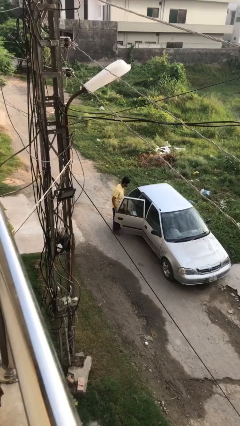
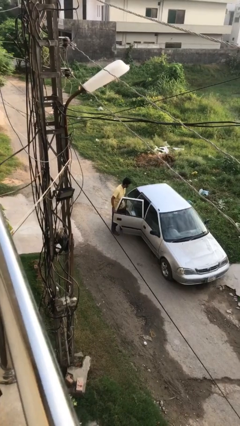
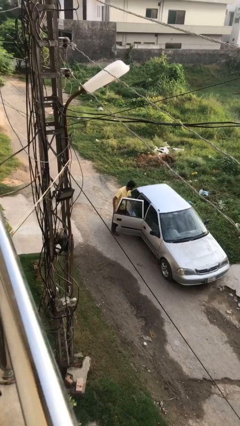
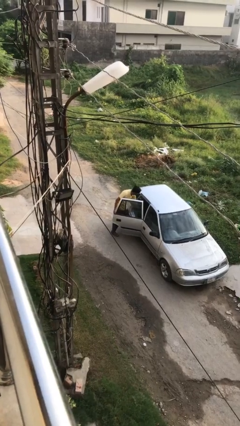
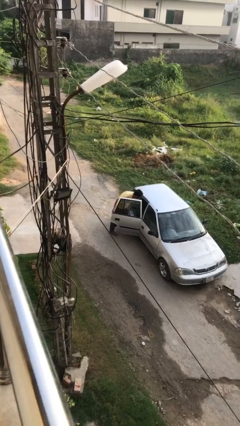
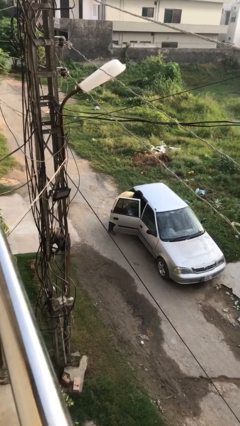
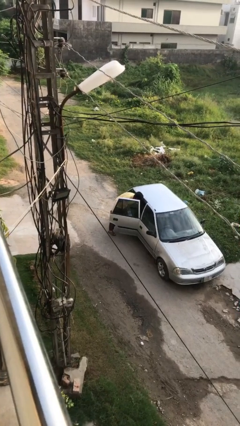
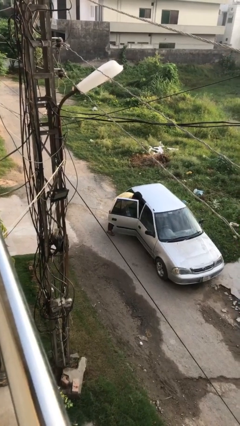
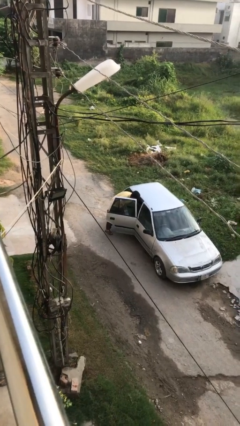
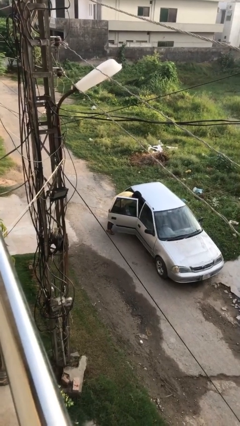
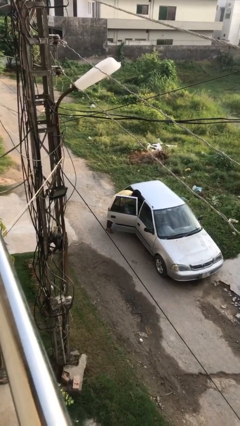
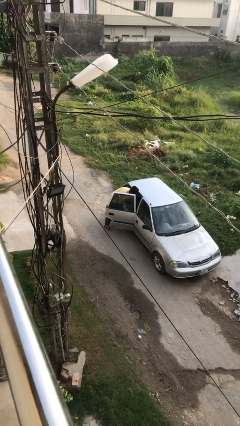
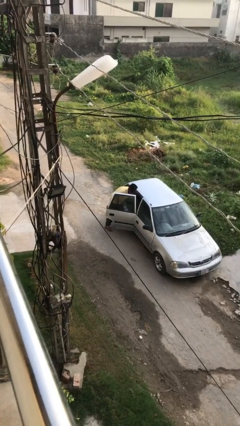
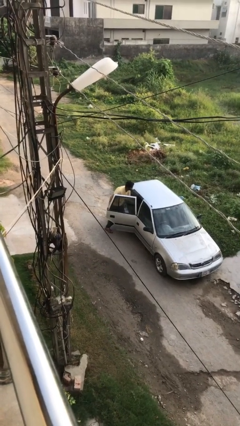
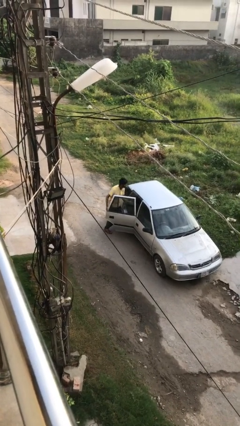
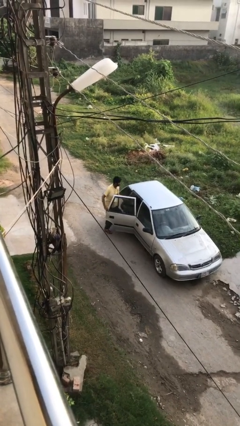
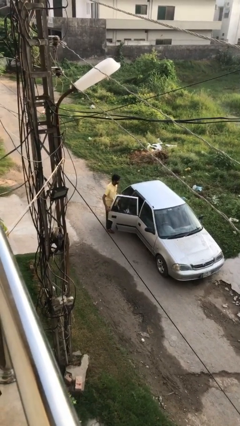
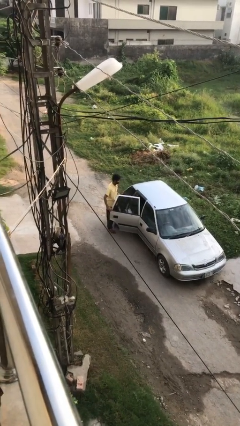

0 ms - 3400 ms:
person unloads car

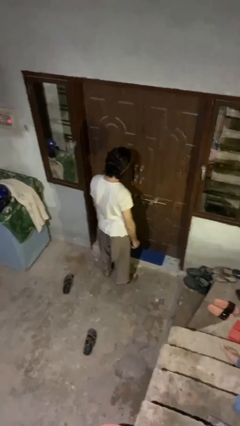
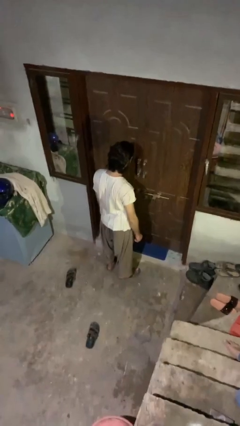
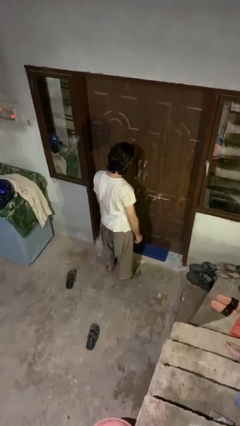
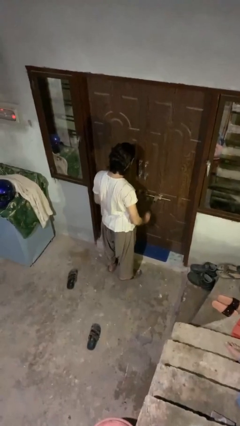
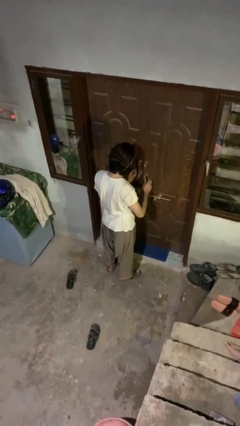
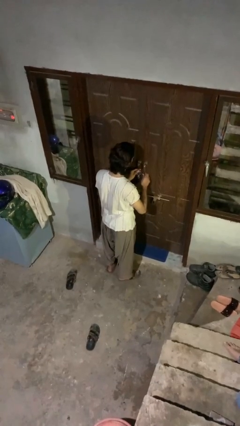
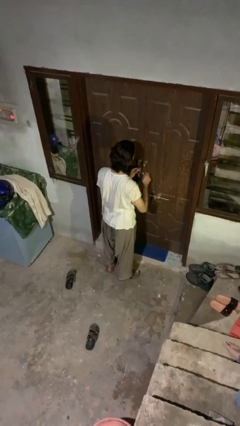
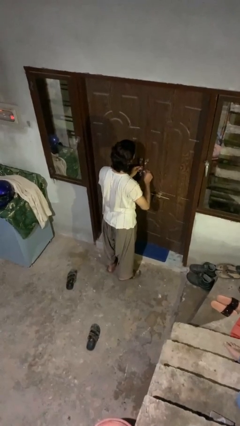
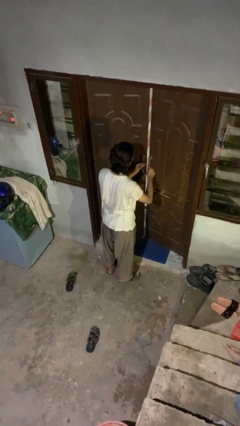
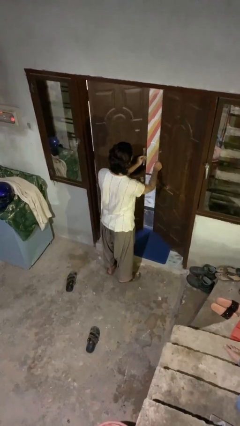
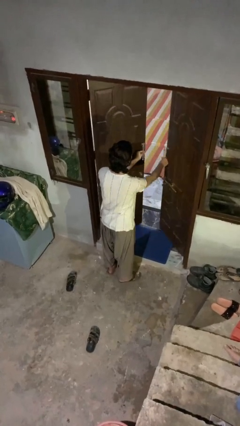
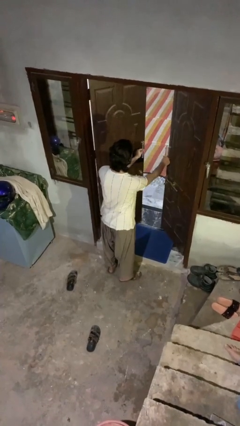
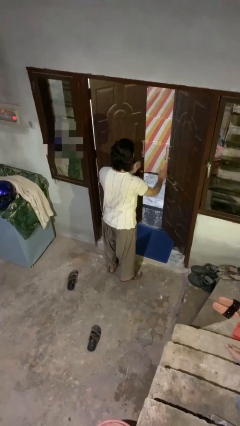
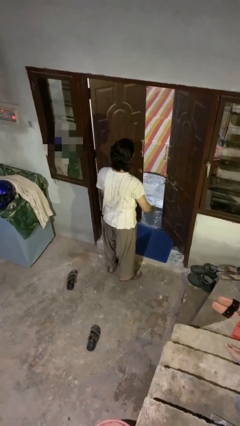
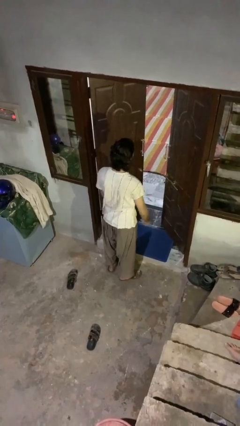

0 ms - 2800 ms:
person opens facility door

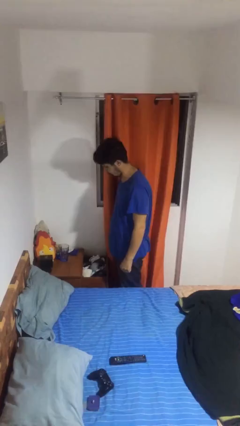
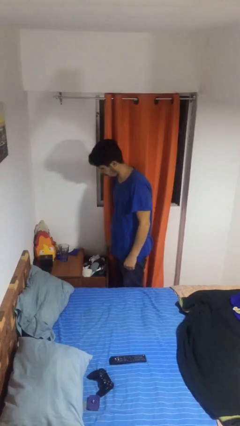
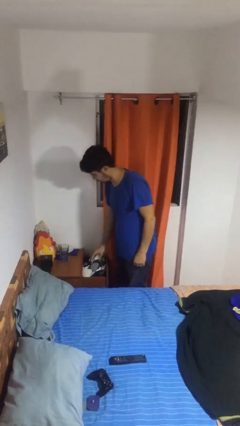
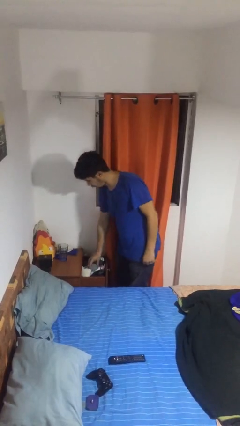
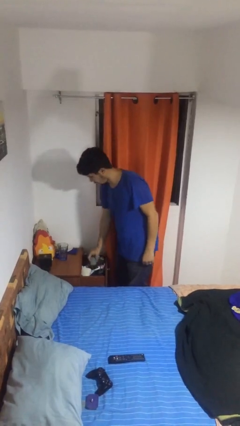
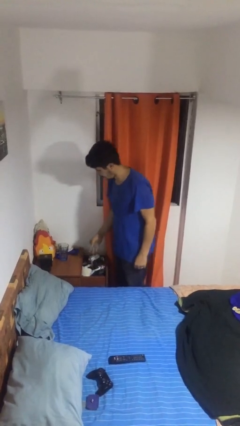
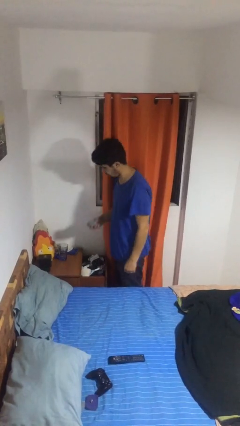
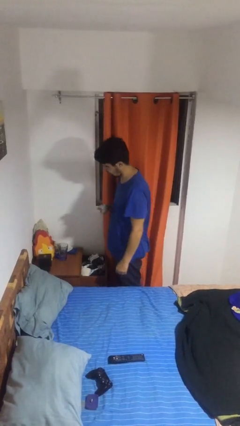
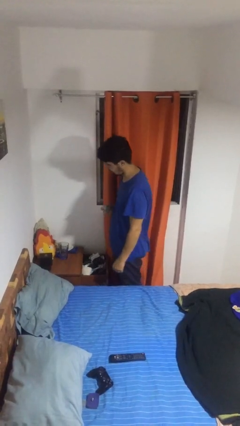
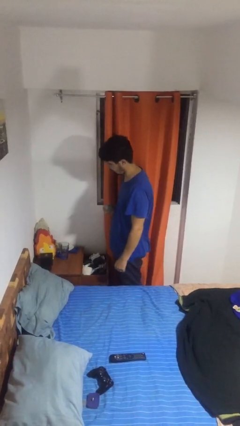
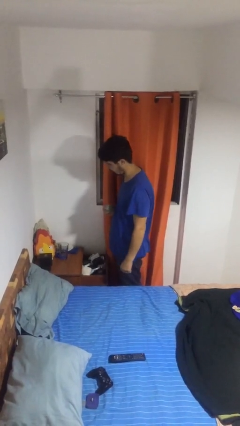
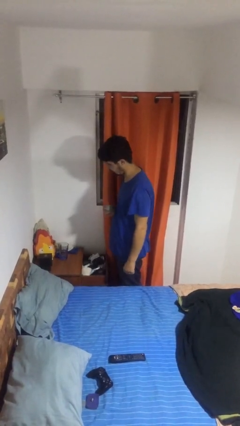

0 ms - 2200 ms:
person takes clothes from dresser

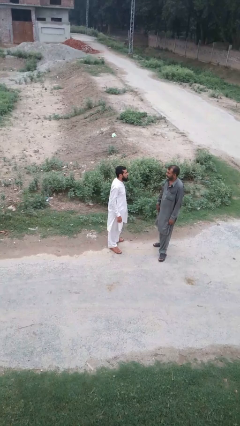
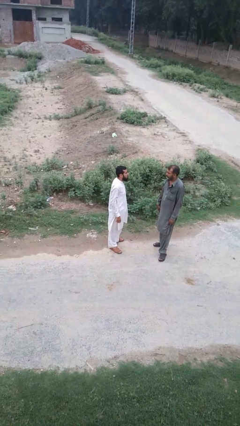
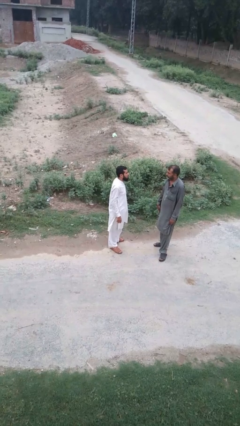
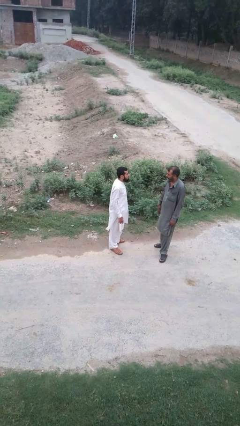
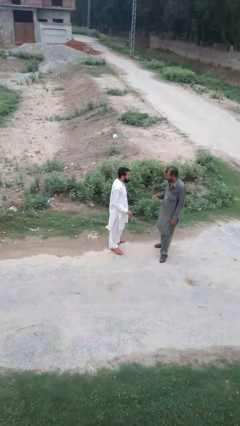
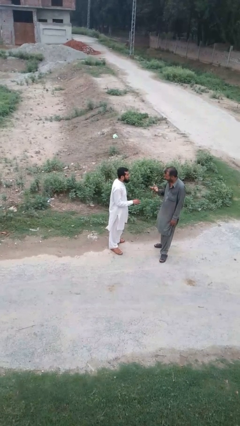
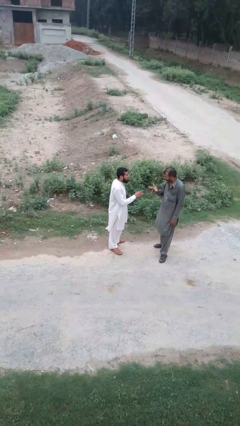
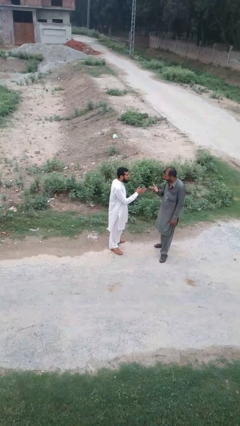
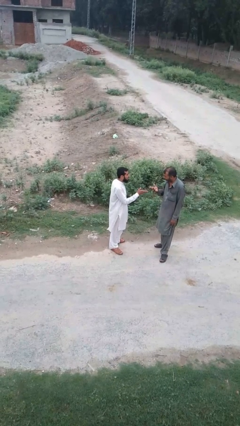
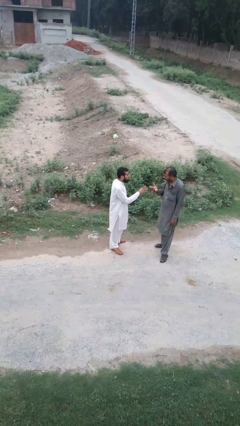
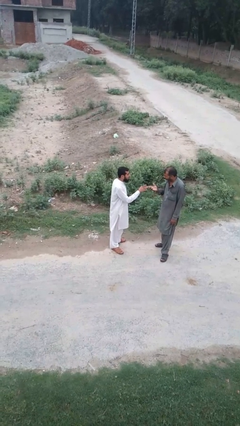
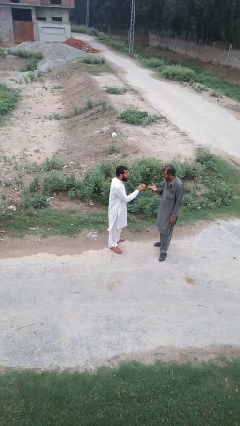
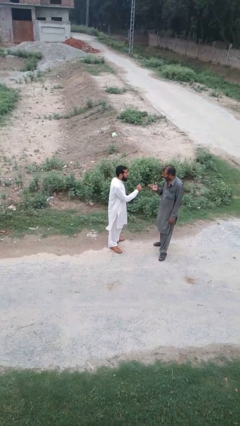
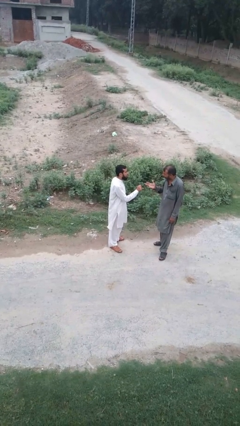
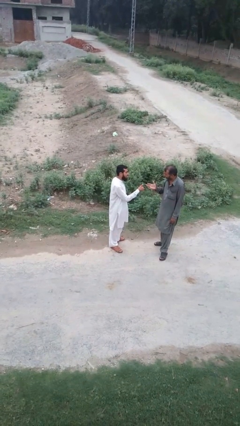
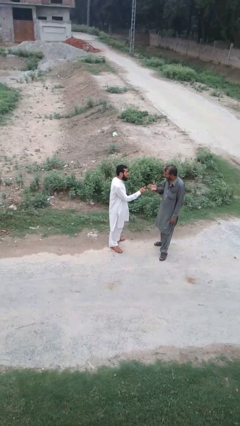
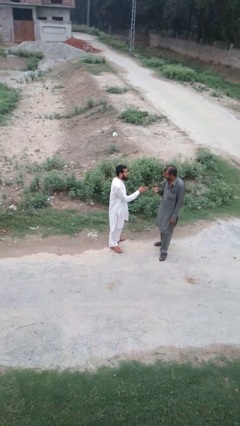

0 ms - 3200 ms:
person talks to person

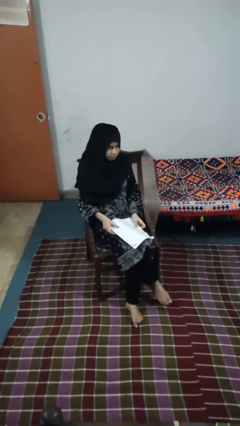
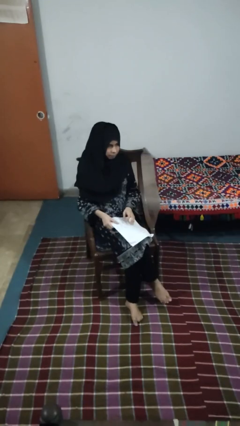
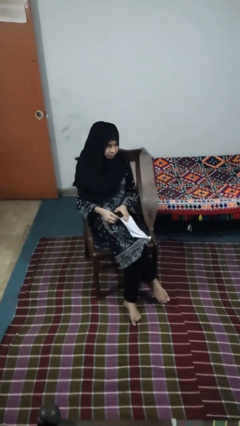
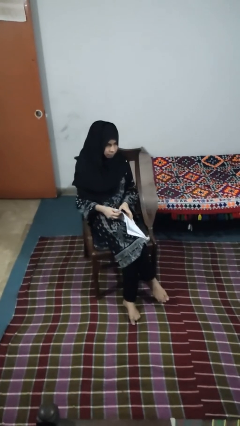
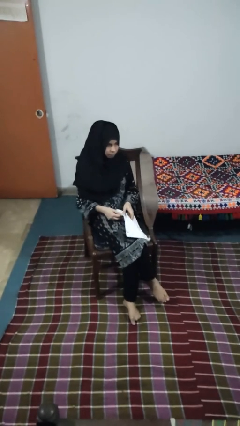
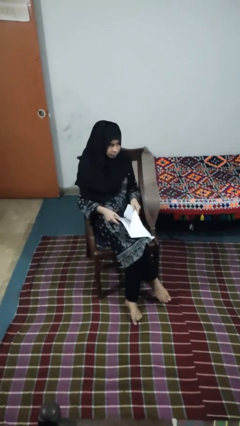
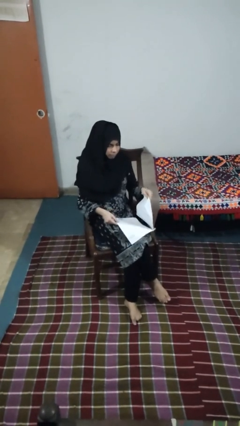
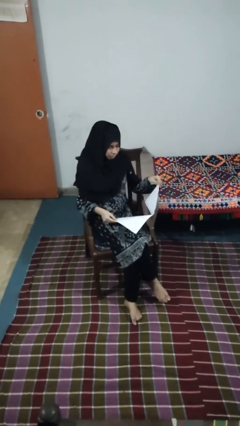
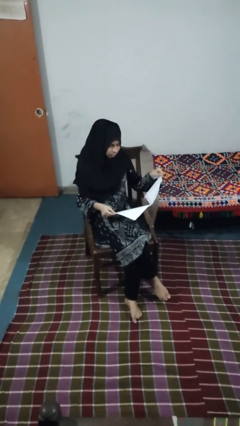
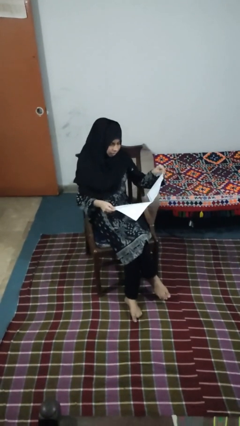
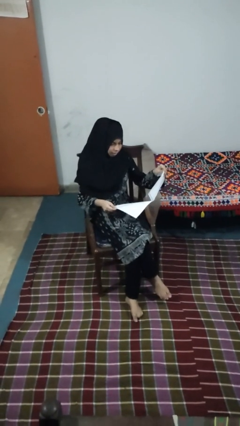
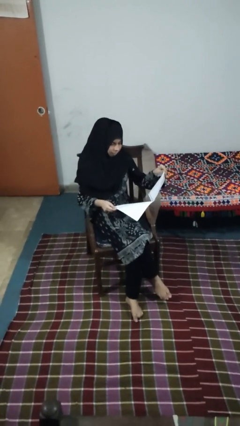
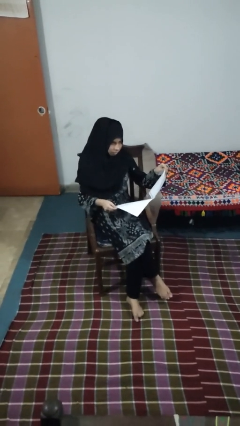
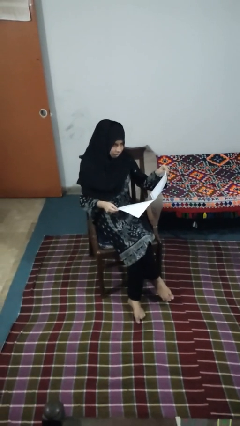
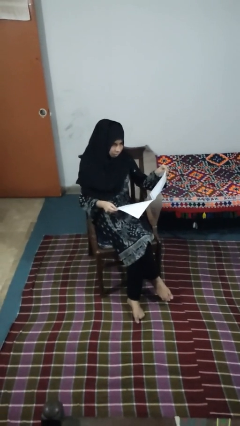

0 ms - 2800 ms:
person reads newspaper

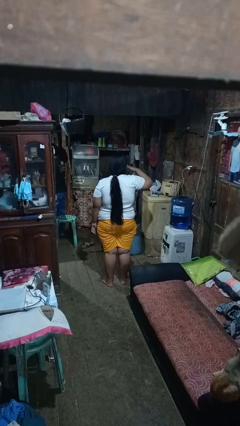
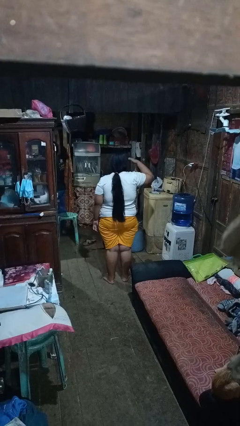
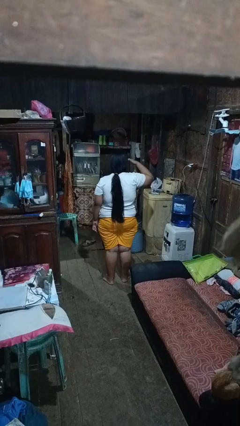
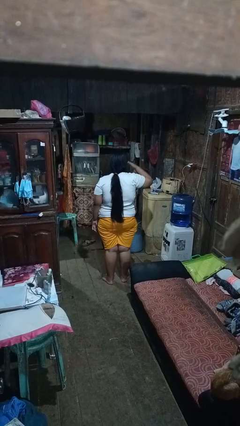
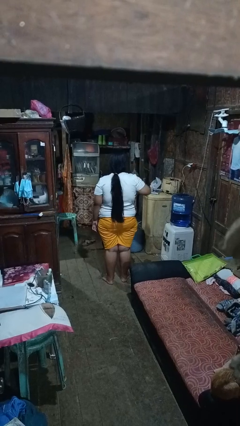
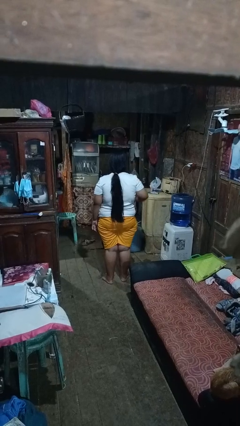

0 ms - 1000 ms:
person salutes

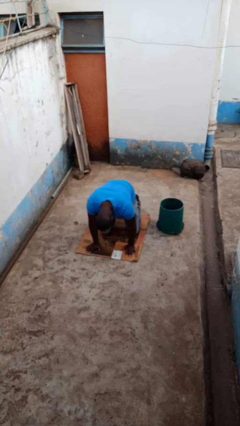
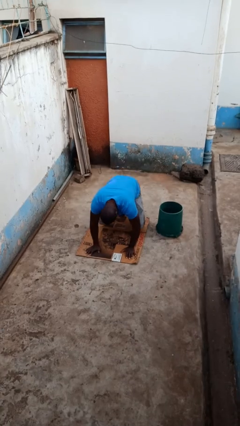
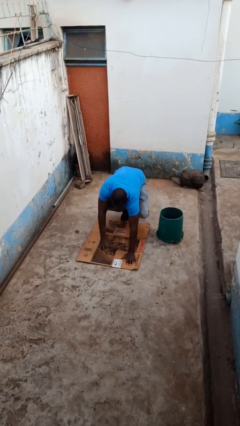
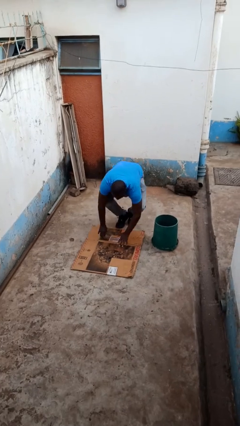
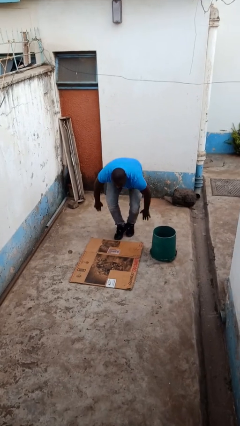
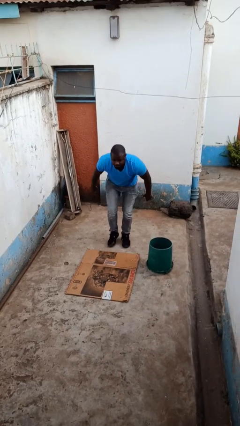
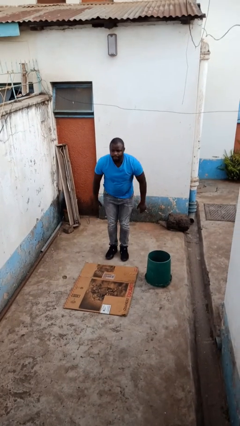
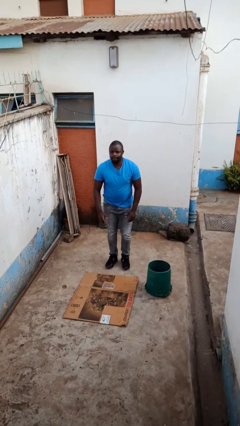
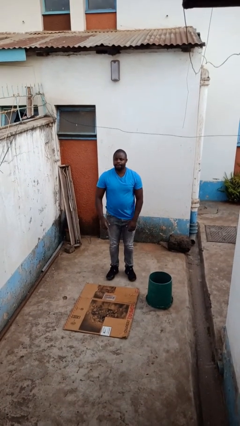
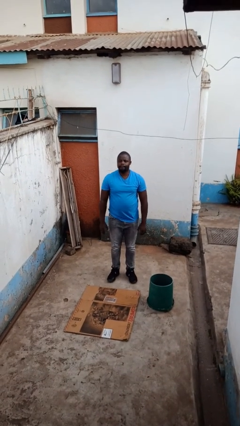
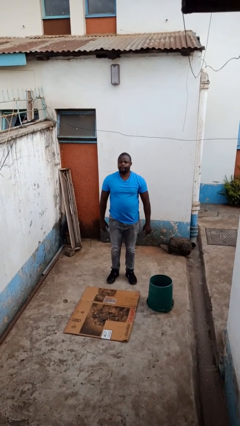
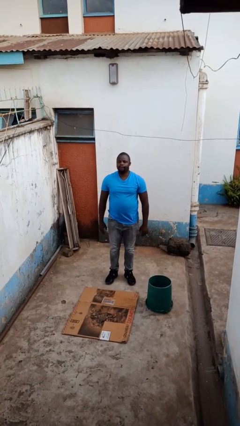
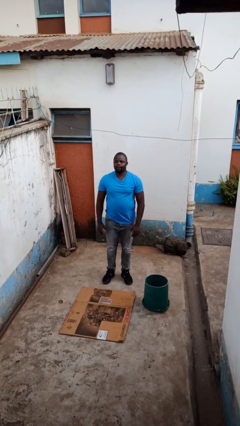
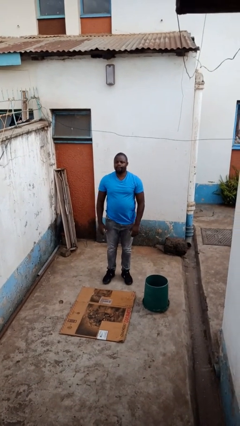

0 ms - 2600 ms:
person stands up from floor
